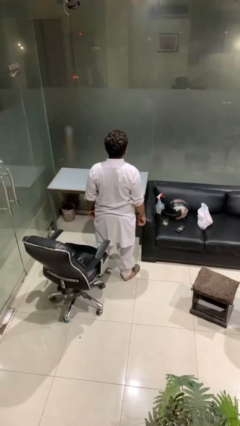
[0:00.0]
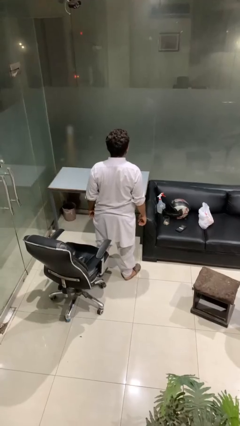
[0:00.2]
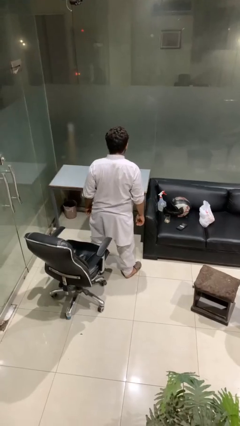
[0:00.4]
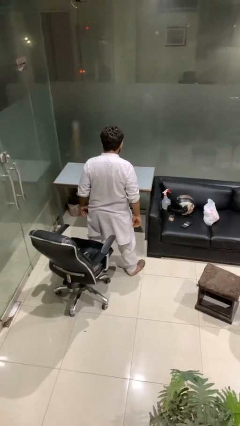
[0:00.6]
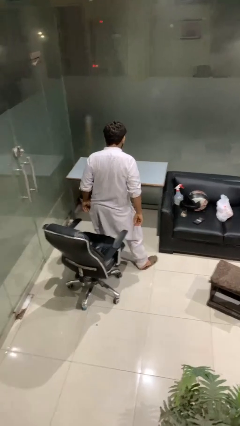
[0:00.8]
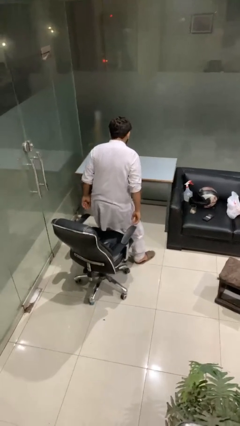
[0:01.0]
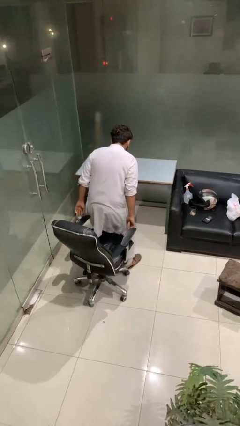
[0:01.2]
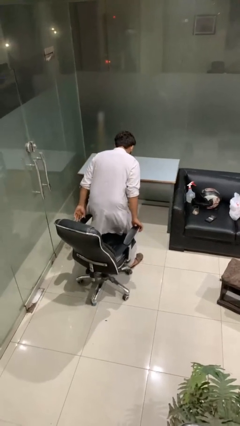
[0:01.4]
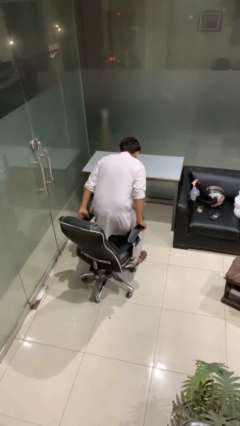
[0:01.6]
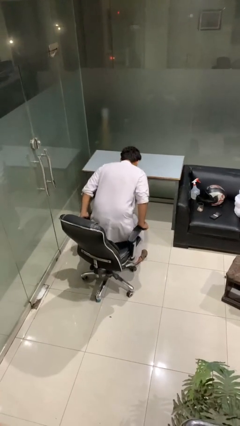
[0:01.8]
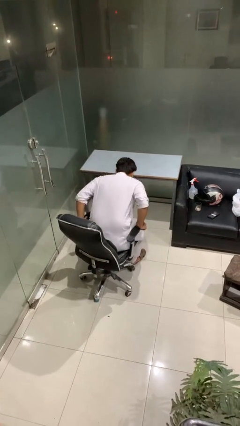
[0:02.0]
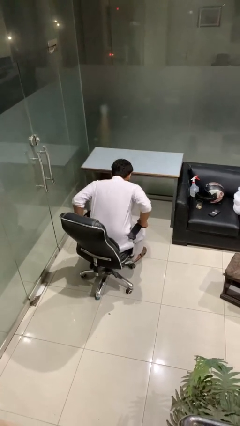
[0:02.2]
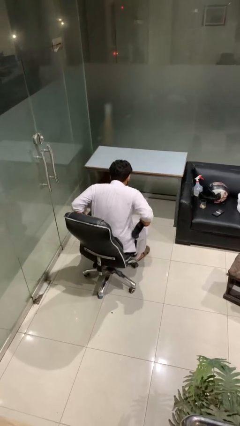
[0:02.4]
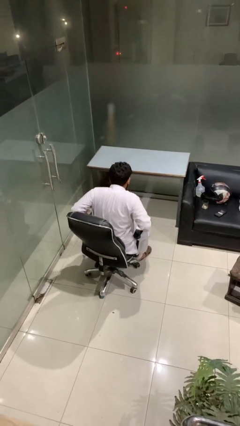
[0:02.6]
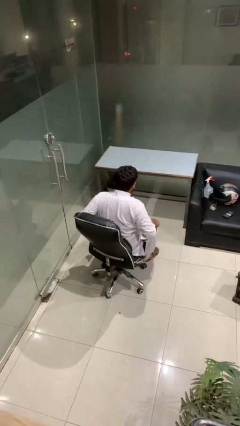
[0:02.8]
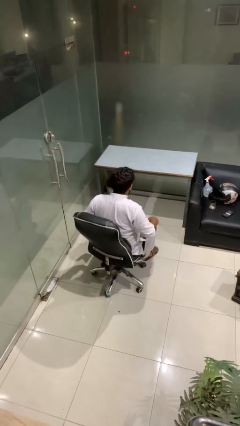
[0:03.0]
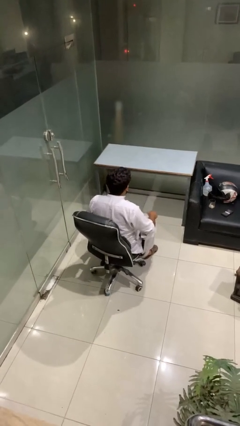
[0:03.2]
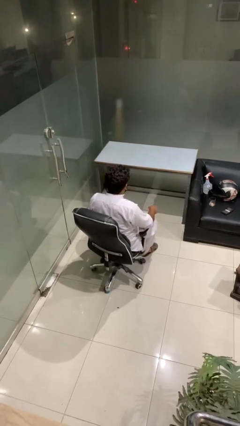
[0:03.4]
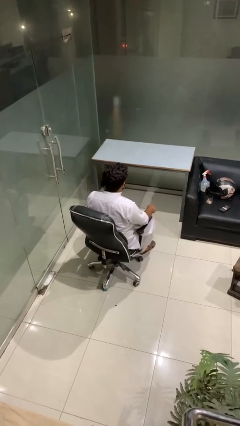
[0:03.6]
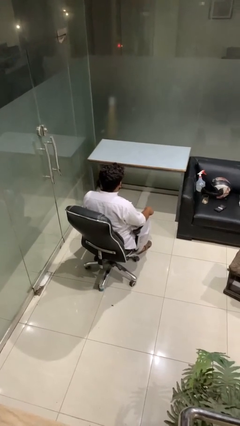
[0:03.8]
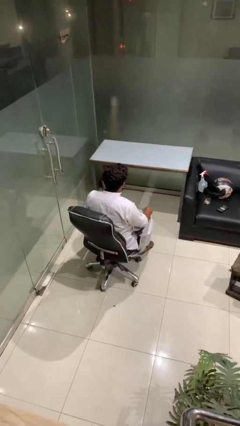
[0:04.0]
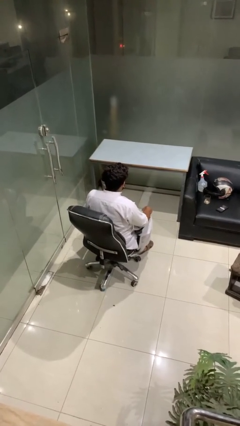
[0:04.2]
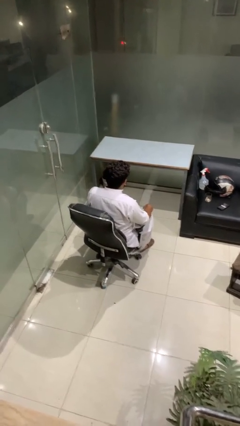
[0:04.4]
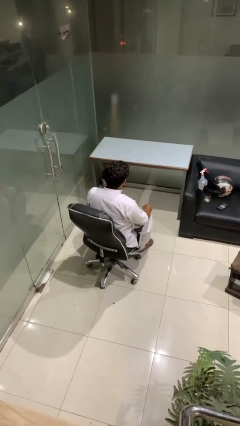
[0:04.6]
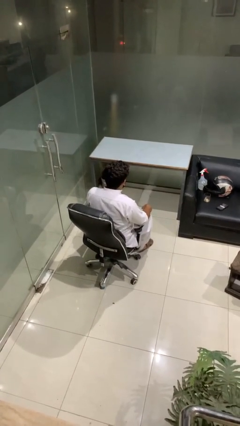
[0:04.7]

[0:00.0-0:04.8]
person sits down

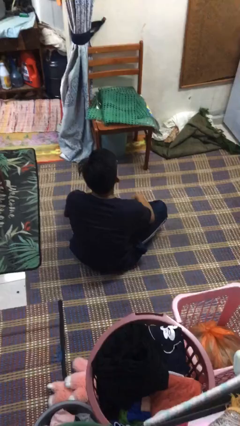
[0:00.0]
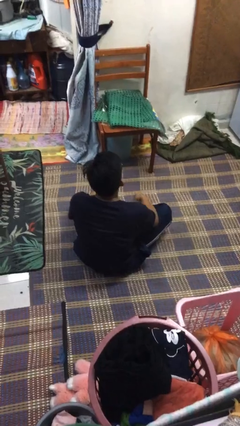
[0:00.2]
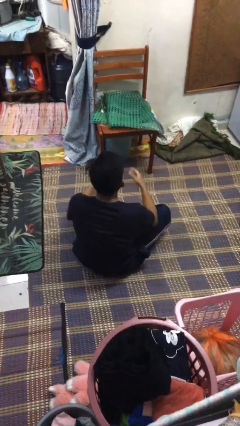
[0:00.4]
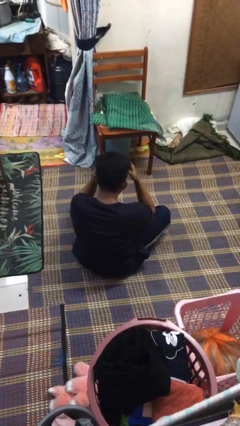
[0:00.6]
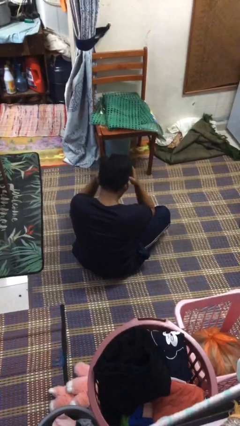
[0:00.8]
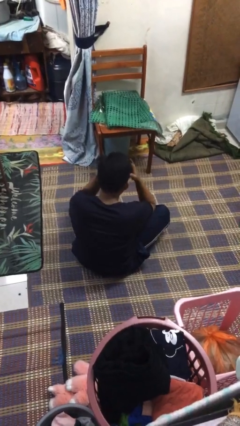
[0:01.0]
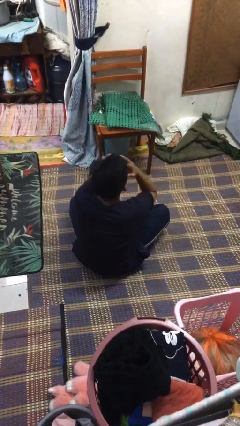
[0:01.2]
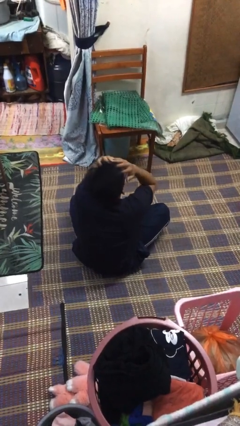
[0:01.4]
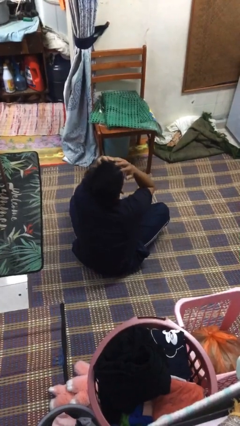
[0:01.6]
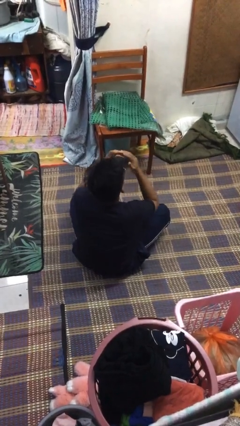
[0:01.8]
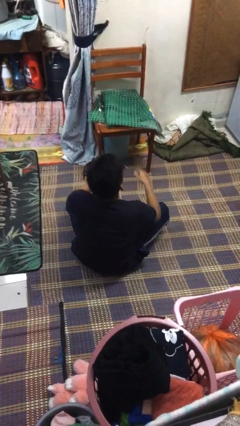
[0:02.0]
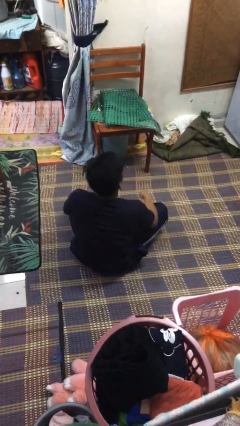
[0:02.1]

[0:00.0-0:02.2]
person covers face with hands

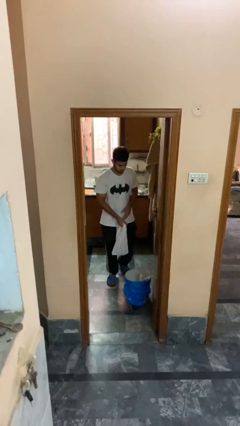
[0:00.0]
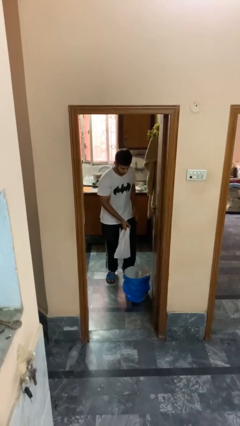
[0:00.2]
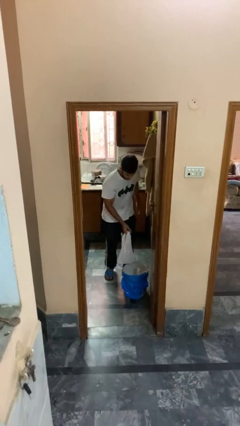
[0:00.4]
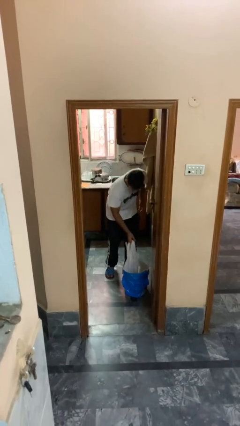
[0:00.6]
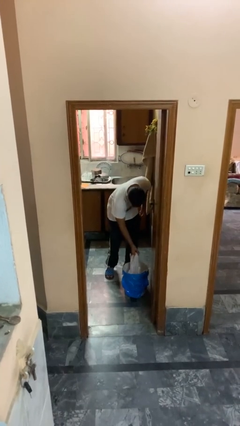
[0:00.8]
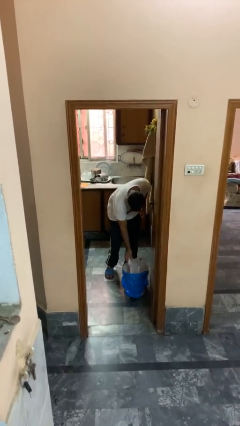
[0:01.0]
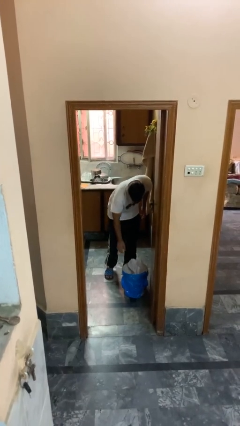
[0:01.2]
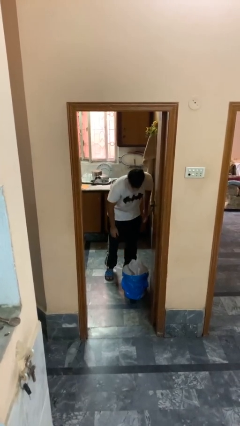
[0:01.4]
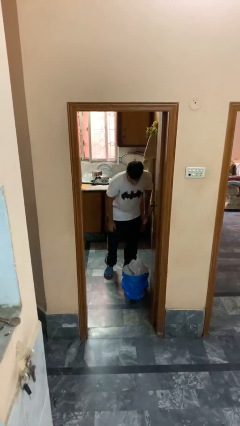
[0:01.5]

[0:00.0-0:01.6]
person discards trash

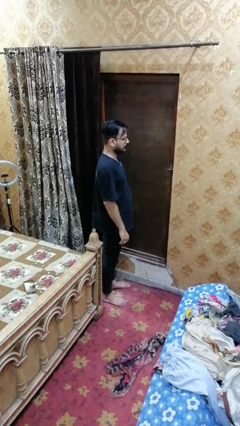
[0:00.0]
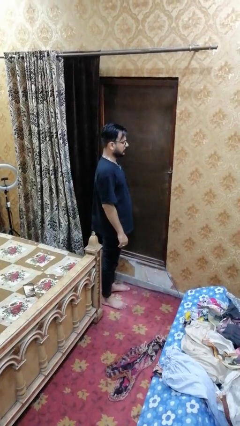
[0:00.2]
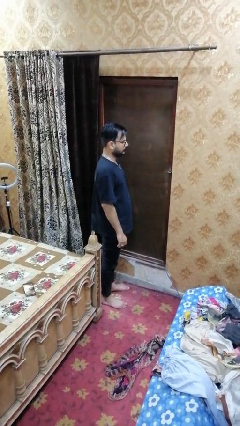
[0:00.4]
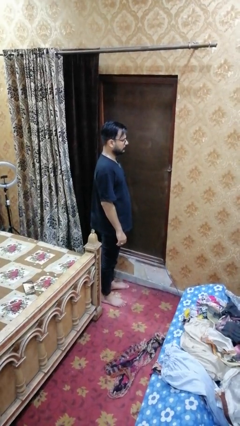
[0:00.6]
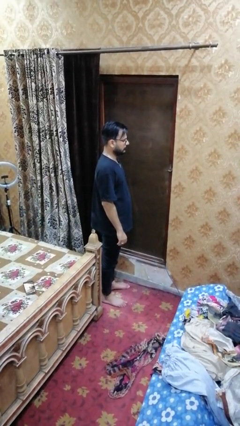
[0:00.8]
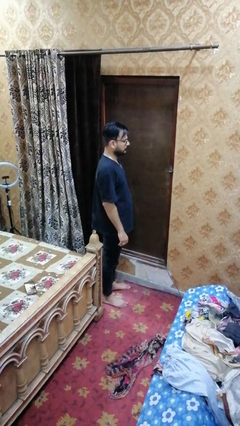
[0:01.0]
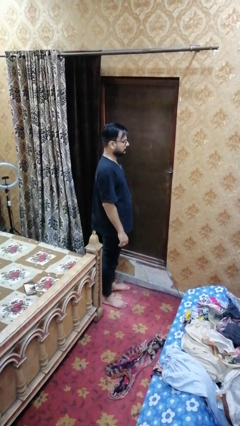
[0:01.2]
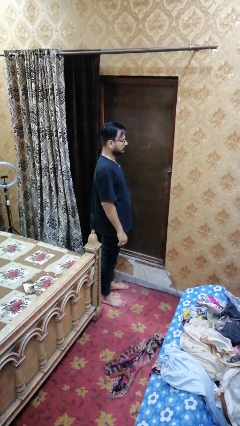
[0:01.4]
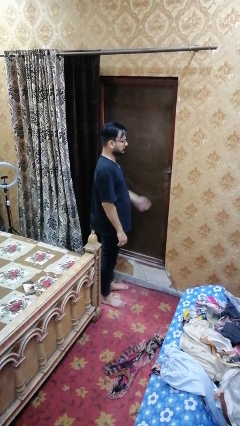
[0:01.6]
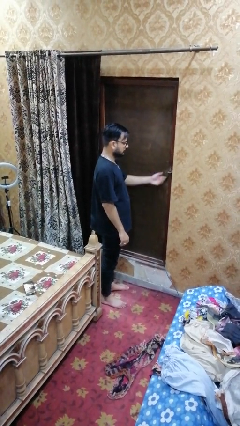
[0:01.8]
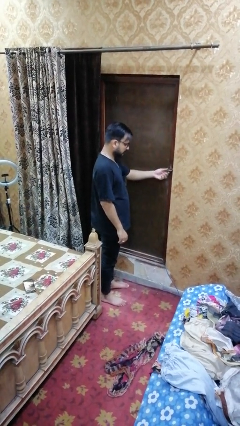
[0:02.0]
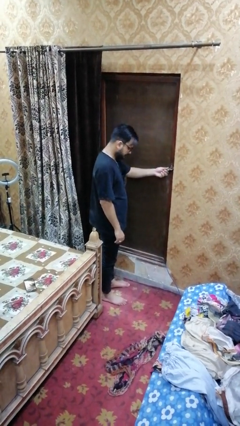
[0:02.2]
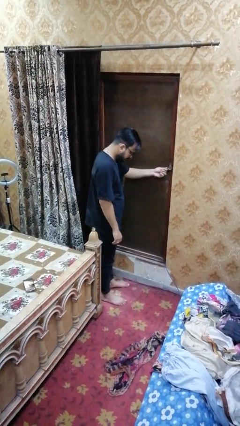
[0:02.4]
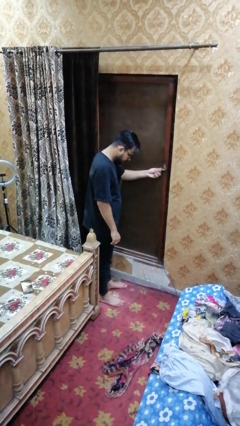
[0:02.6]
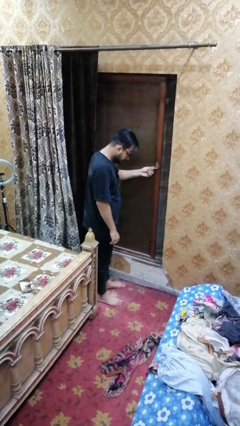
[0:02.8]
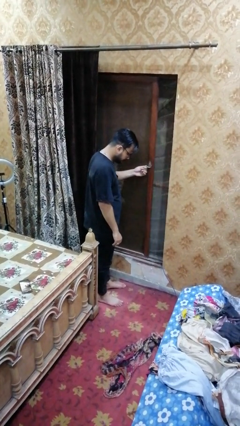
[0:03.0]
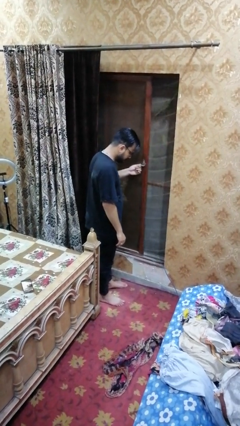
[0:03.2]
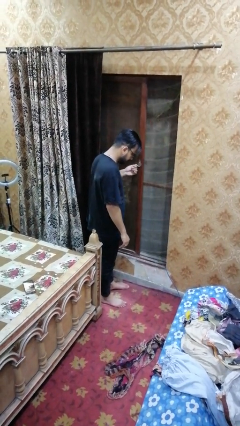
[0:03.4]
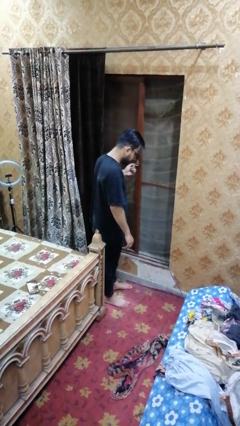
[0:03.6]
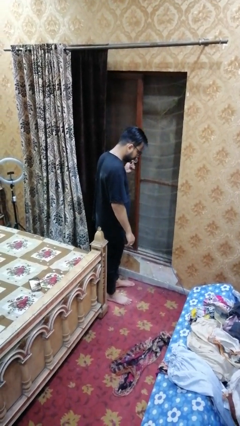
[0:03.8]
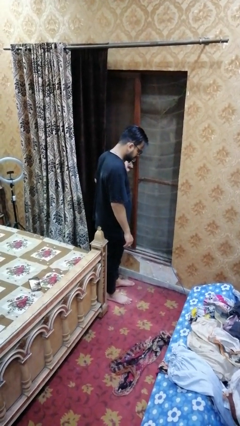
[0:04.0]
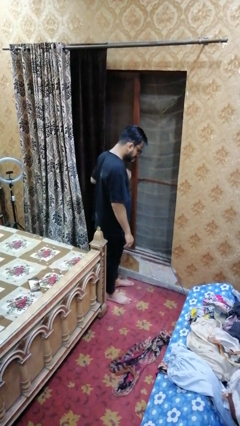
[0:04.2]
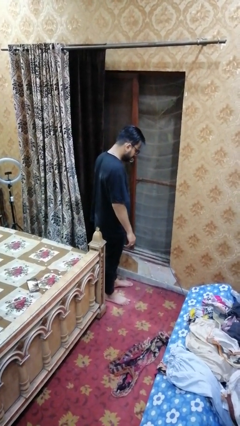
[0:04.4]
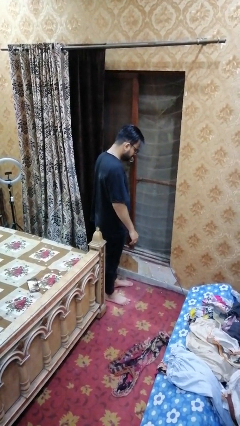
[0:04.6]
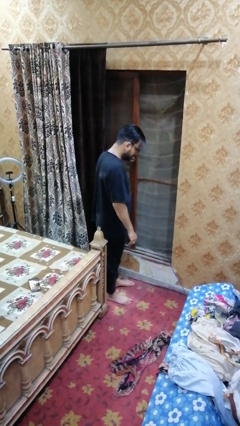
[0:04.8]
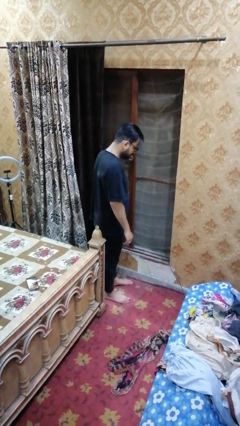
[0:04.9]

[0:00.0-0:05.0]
person opens sliding door

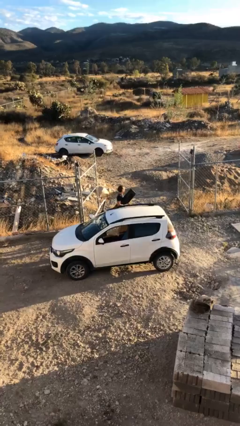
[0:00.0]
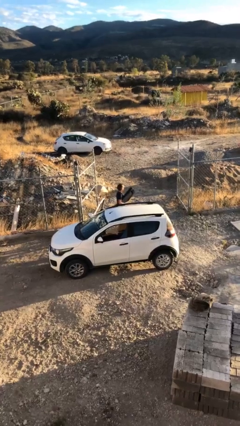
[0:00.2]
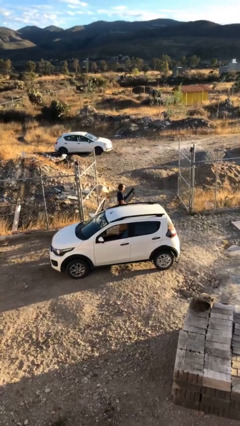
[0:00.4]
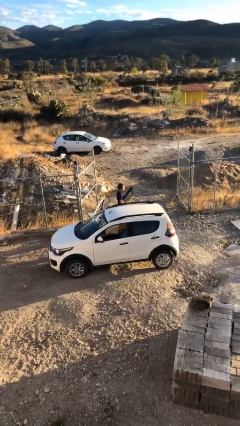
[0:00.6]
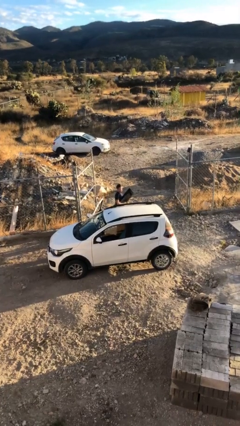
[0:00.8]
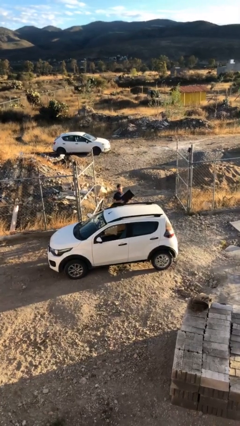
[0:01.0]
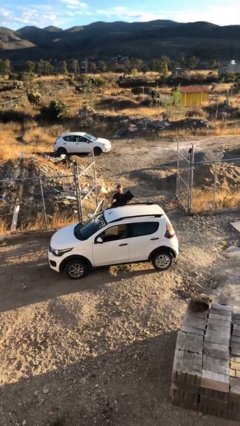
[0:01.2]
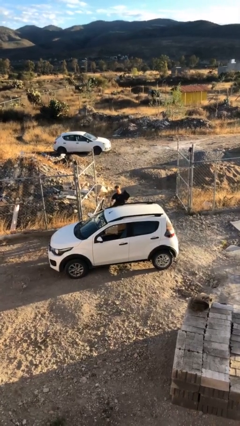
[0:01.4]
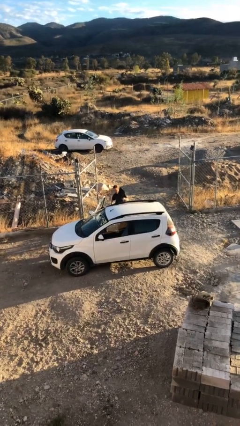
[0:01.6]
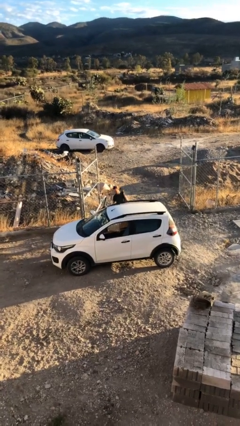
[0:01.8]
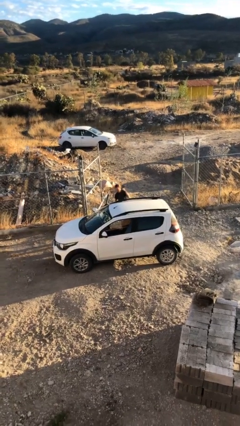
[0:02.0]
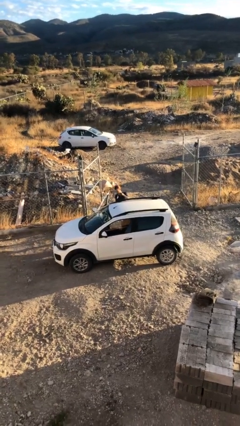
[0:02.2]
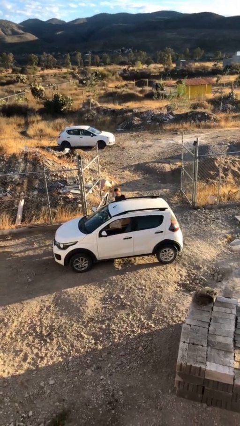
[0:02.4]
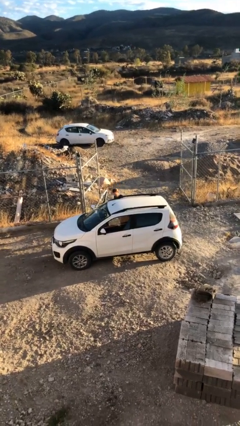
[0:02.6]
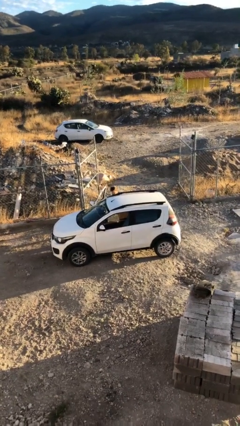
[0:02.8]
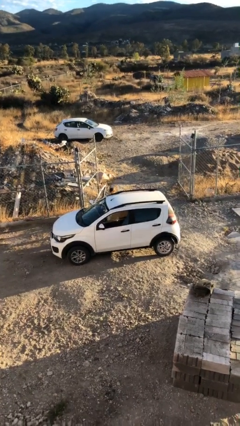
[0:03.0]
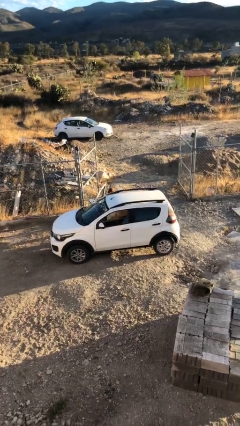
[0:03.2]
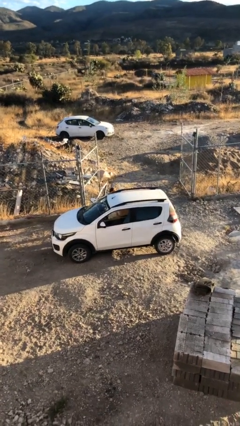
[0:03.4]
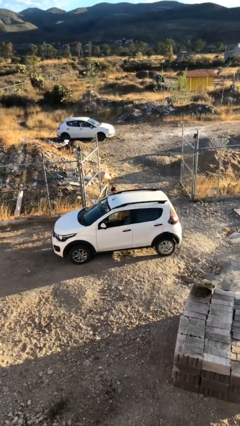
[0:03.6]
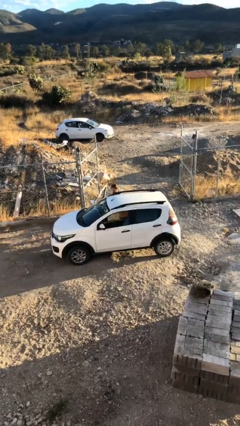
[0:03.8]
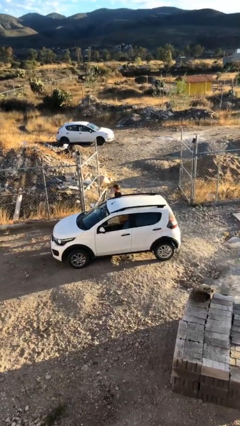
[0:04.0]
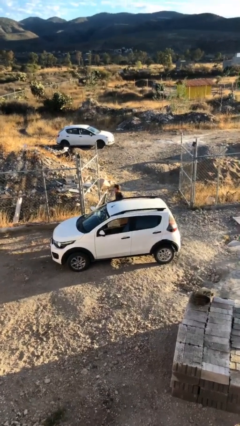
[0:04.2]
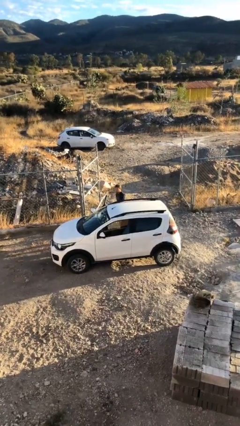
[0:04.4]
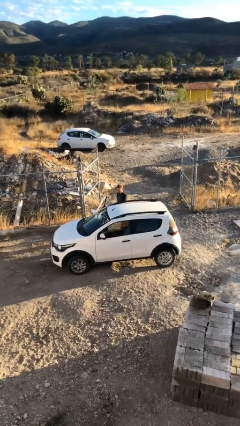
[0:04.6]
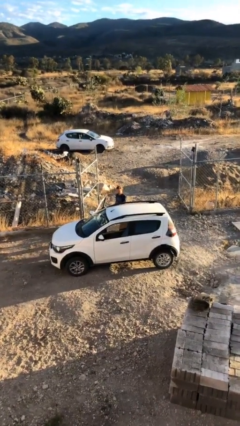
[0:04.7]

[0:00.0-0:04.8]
person loads car
